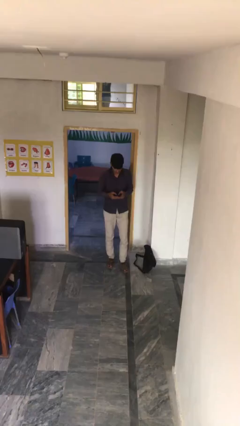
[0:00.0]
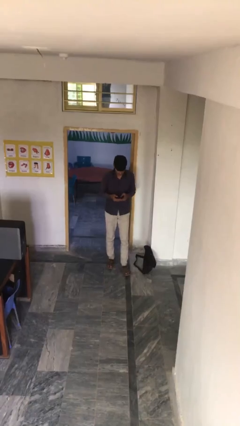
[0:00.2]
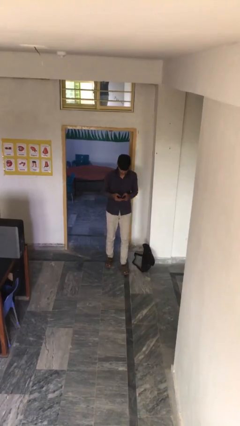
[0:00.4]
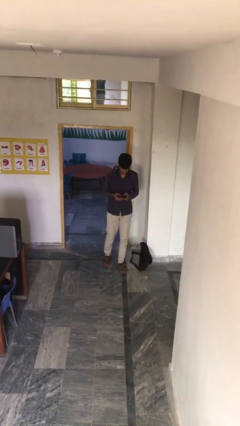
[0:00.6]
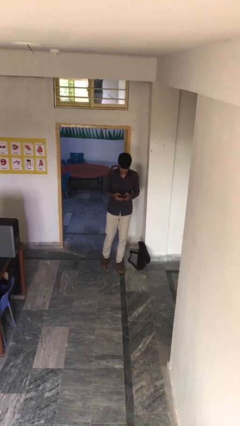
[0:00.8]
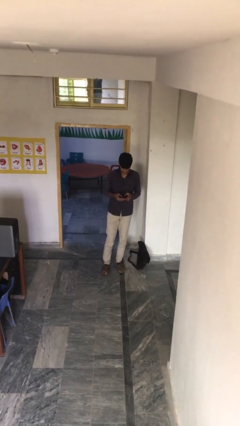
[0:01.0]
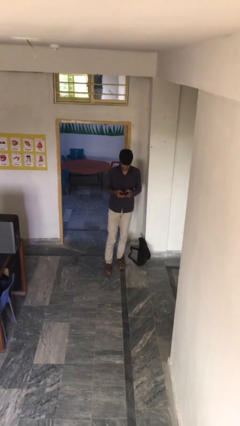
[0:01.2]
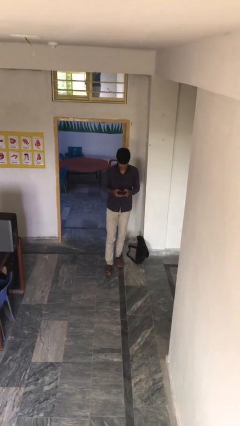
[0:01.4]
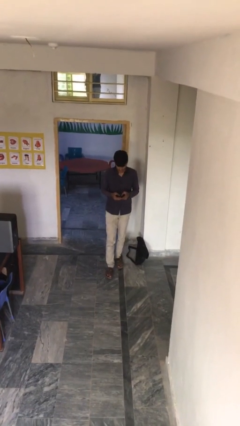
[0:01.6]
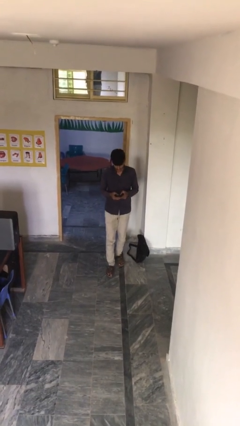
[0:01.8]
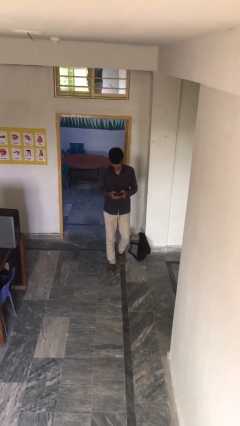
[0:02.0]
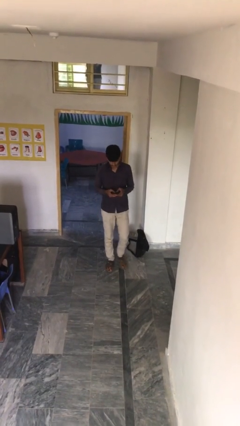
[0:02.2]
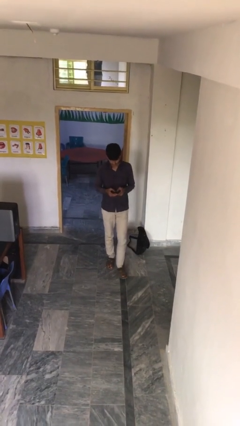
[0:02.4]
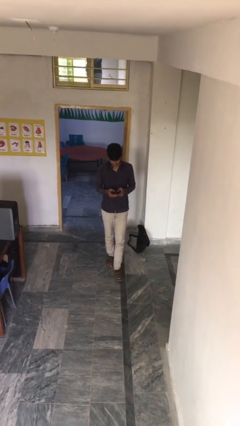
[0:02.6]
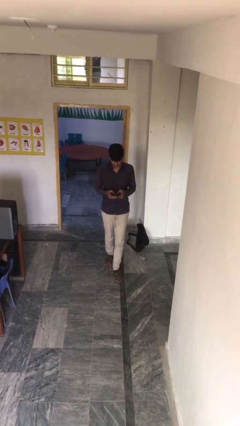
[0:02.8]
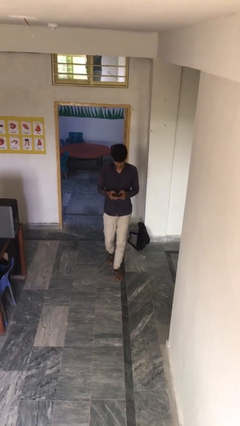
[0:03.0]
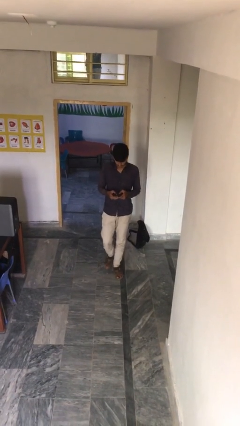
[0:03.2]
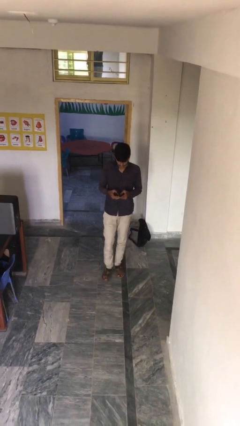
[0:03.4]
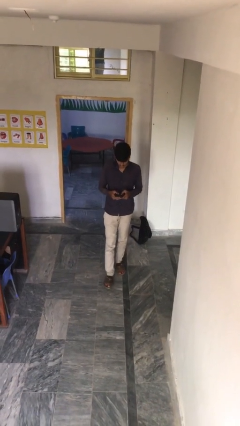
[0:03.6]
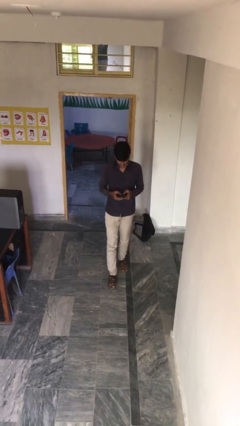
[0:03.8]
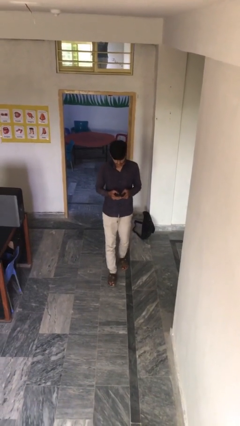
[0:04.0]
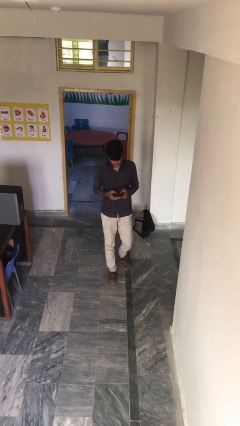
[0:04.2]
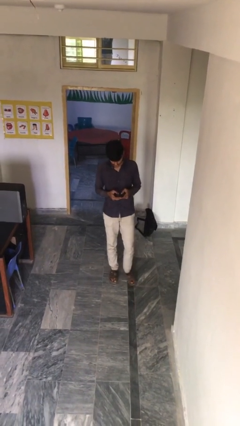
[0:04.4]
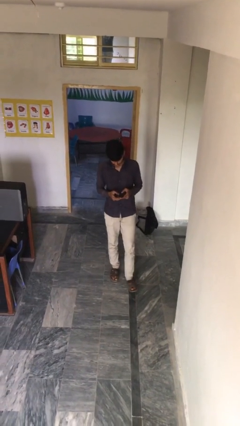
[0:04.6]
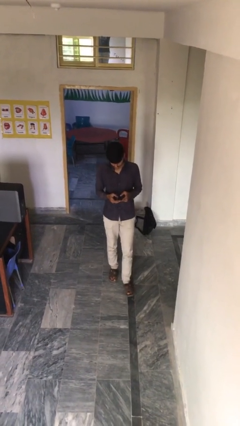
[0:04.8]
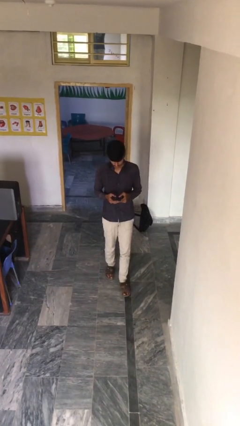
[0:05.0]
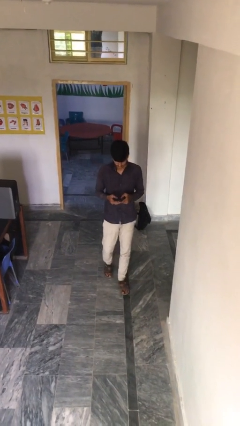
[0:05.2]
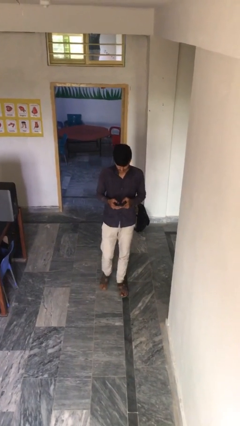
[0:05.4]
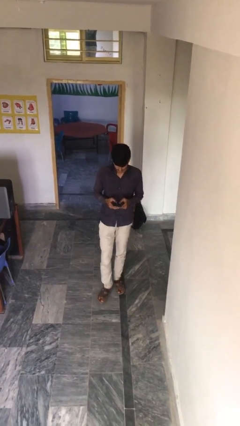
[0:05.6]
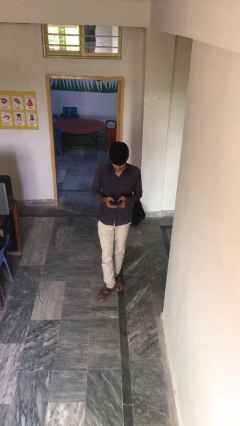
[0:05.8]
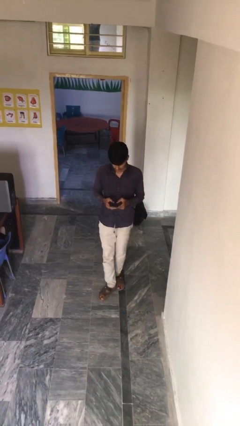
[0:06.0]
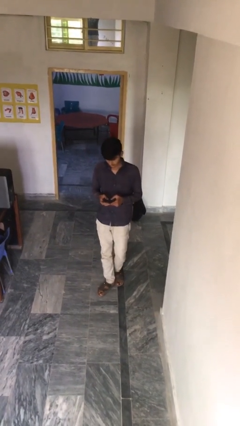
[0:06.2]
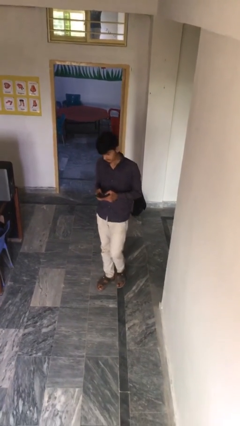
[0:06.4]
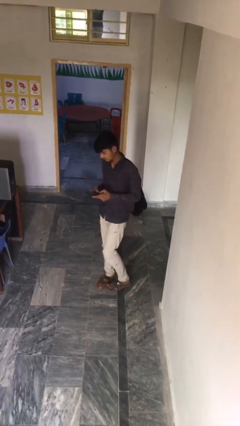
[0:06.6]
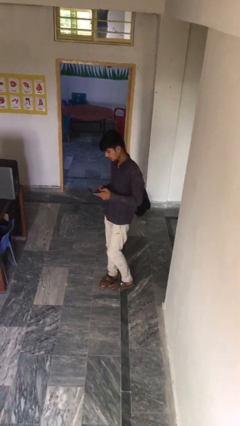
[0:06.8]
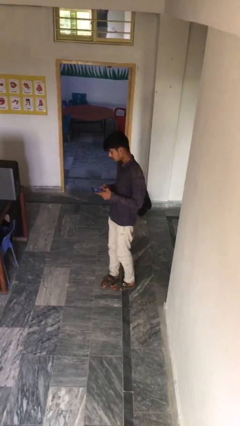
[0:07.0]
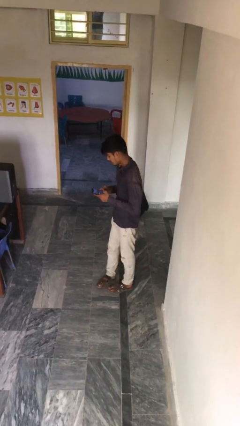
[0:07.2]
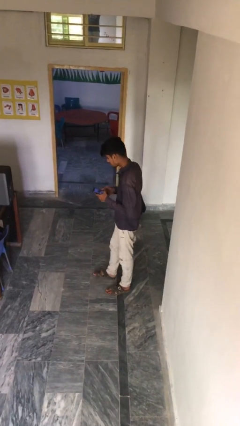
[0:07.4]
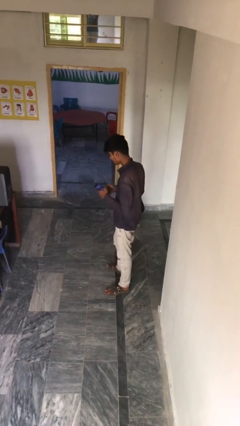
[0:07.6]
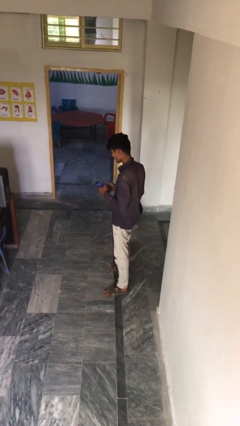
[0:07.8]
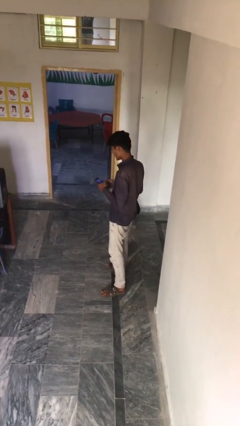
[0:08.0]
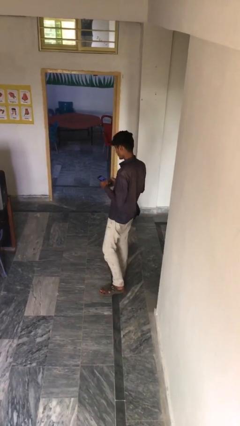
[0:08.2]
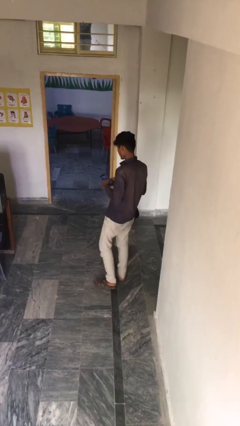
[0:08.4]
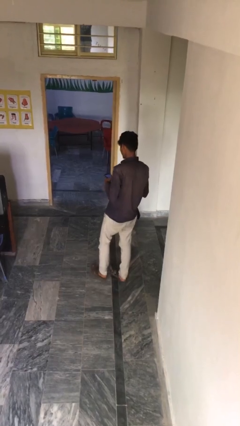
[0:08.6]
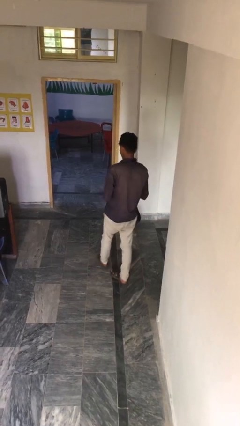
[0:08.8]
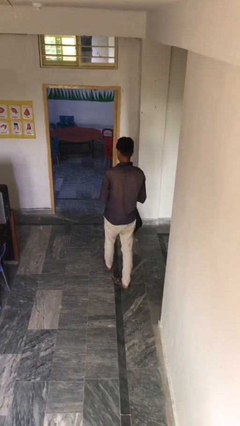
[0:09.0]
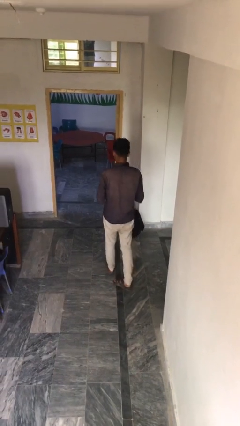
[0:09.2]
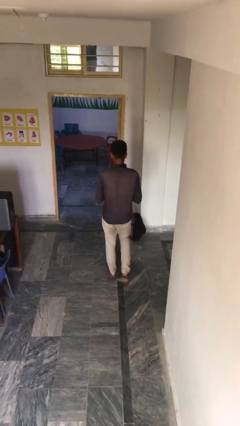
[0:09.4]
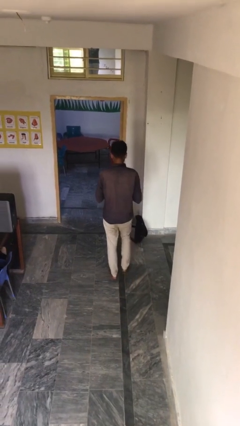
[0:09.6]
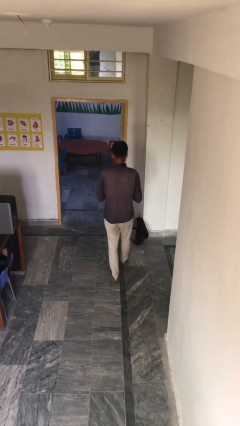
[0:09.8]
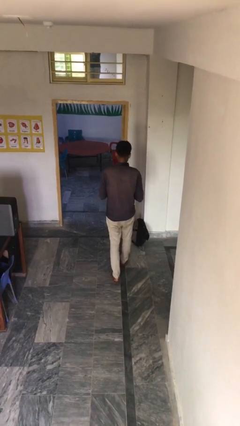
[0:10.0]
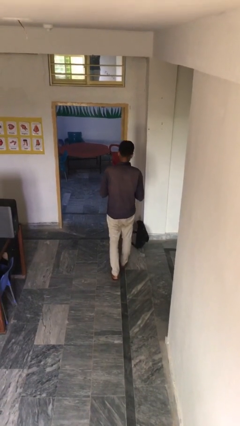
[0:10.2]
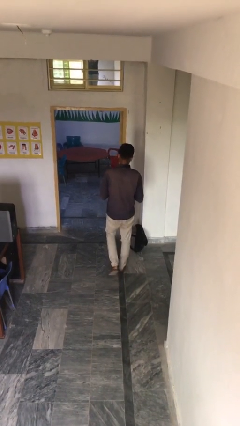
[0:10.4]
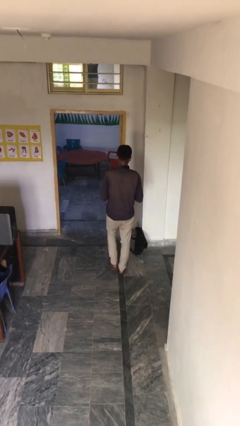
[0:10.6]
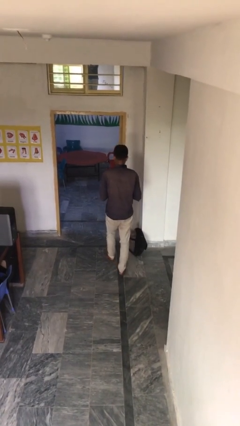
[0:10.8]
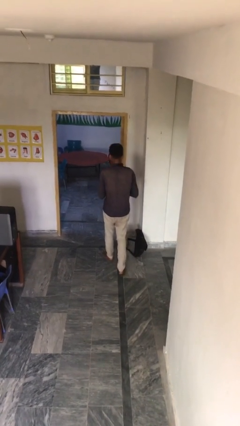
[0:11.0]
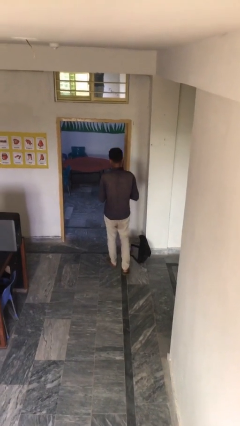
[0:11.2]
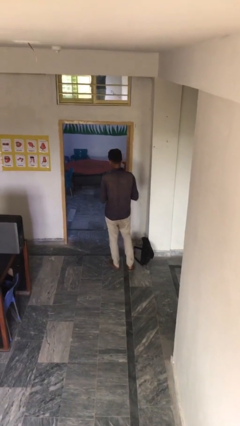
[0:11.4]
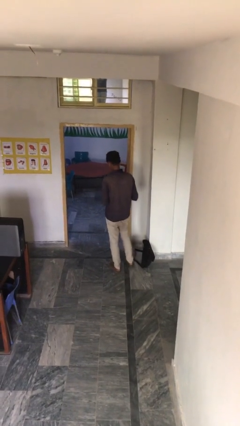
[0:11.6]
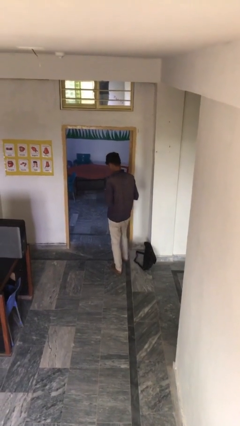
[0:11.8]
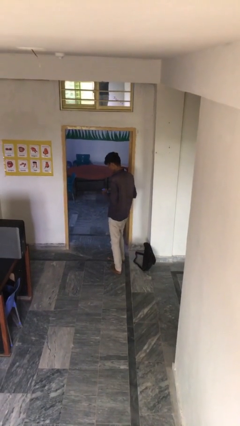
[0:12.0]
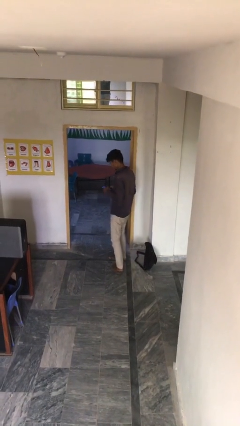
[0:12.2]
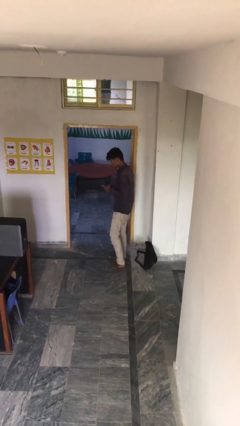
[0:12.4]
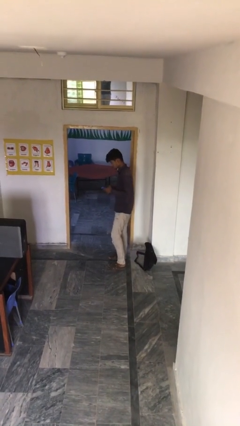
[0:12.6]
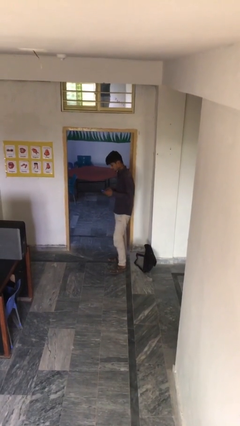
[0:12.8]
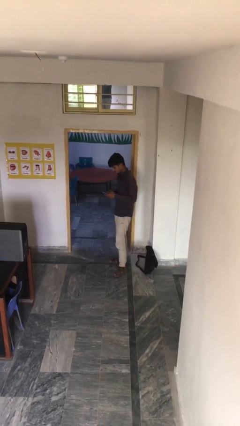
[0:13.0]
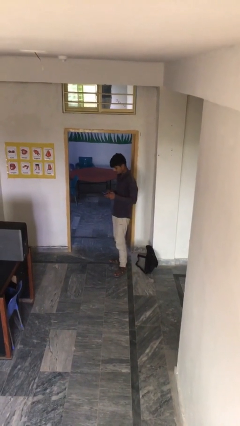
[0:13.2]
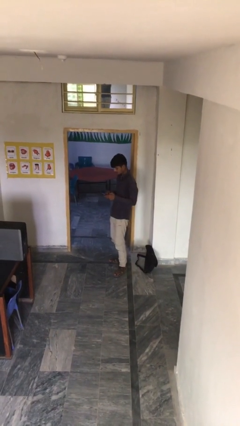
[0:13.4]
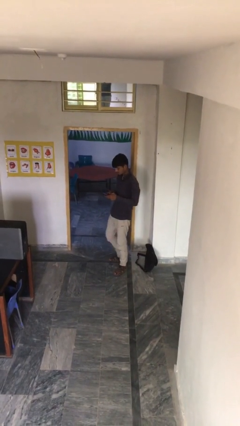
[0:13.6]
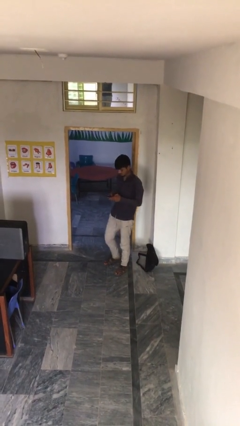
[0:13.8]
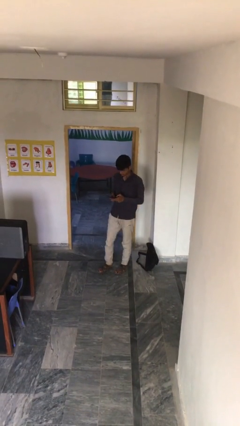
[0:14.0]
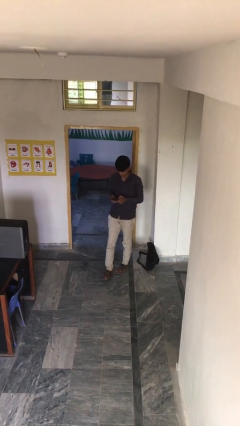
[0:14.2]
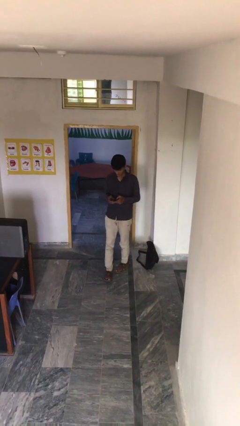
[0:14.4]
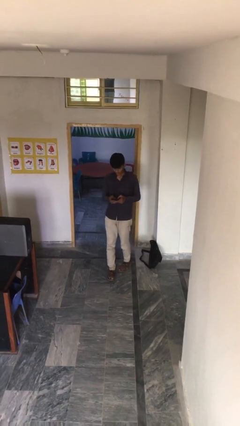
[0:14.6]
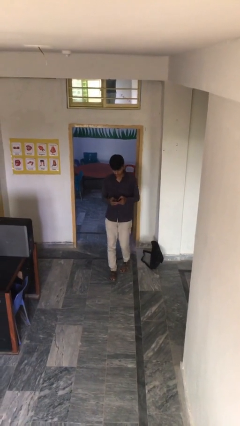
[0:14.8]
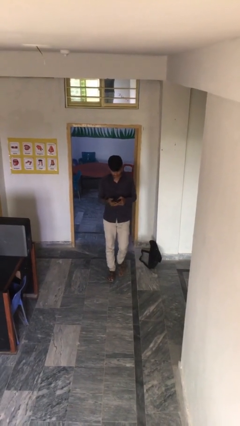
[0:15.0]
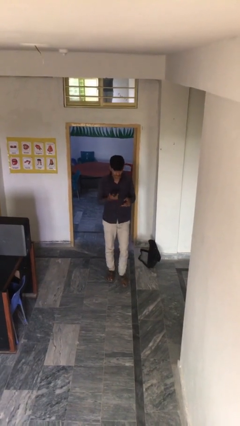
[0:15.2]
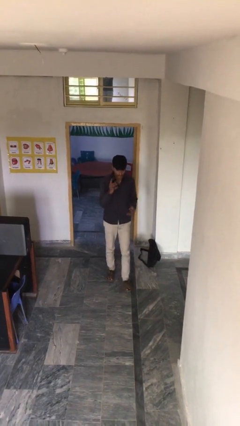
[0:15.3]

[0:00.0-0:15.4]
person texts on phone

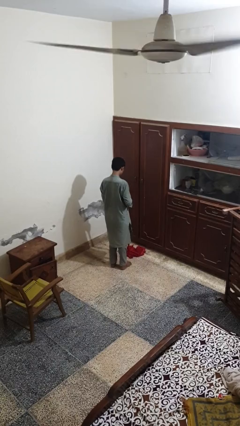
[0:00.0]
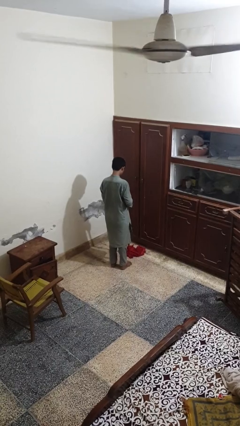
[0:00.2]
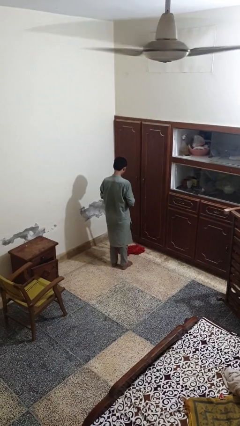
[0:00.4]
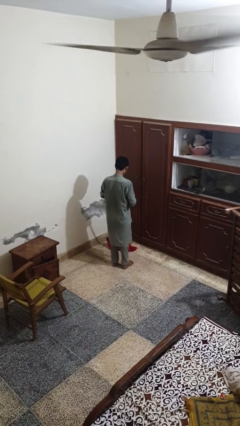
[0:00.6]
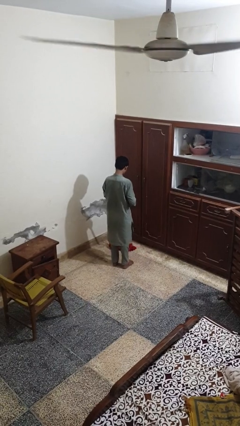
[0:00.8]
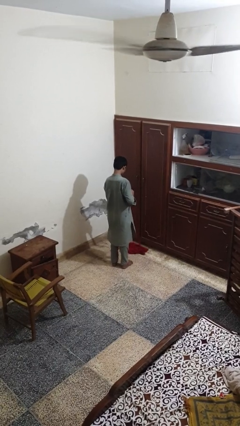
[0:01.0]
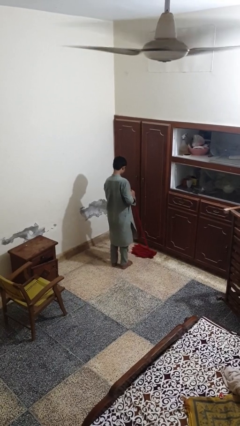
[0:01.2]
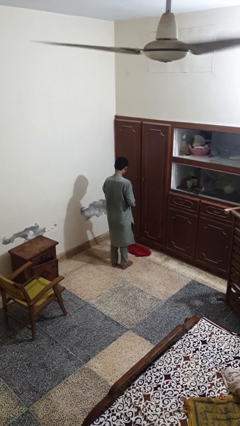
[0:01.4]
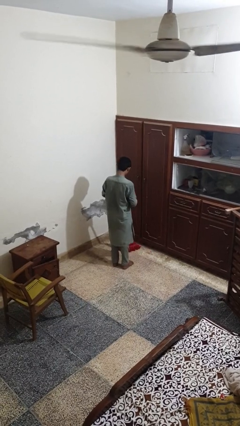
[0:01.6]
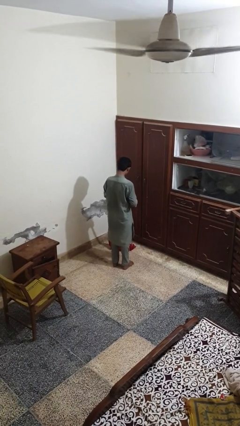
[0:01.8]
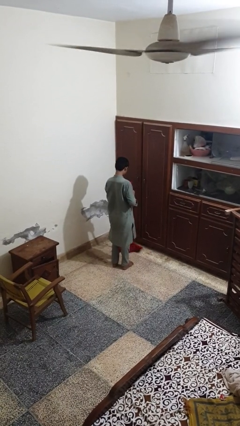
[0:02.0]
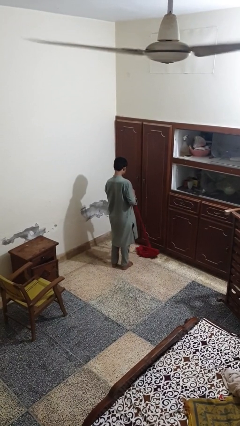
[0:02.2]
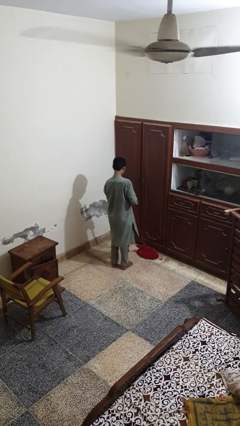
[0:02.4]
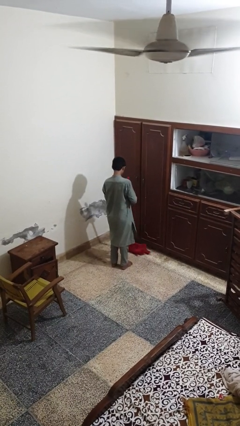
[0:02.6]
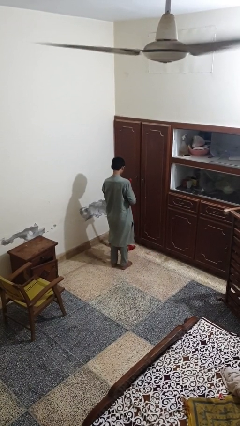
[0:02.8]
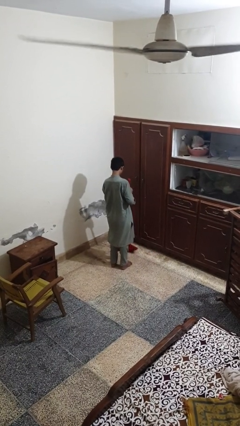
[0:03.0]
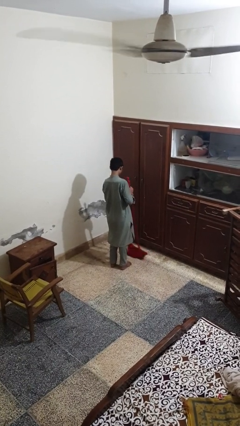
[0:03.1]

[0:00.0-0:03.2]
person mops
